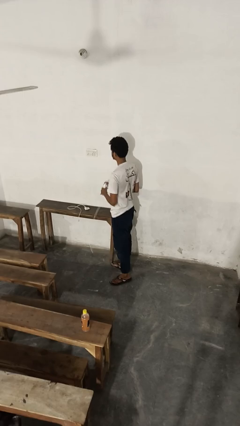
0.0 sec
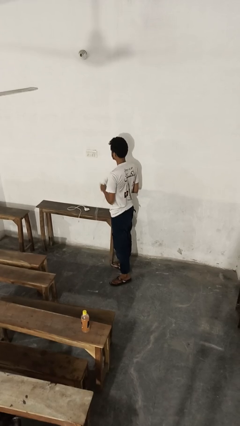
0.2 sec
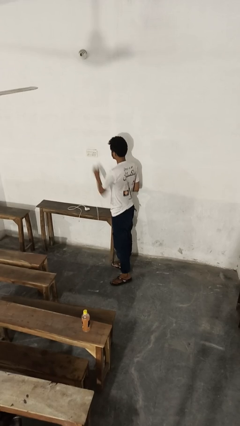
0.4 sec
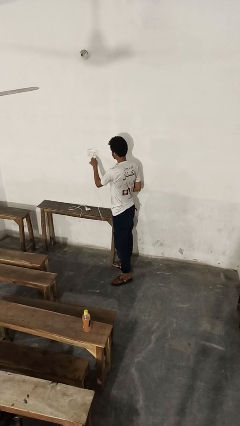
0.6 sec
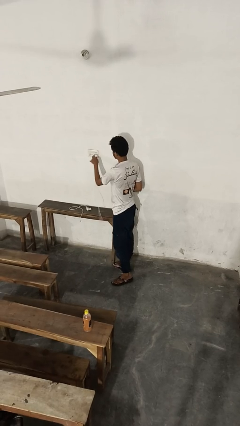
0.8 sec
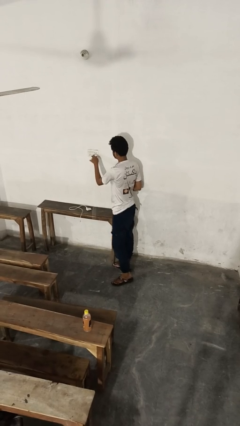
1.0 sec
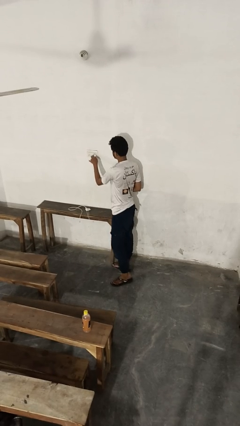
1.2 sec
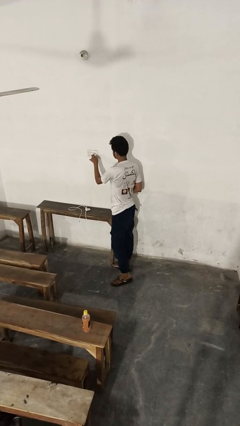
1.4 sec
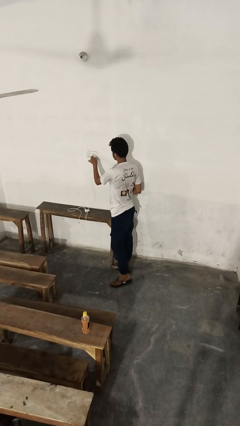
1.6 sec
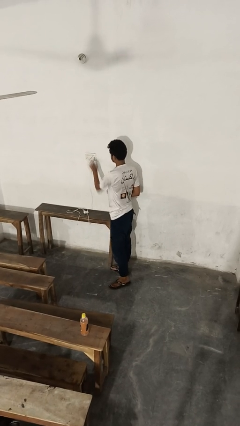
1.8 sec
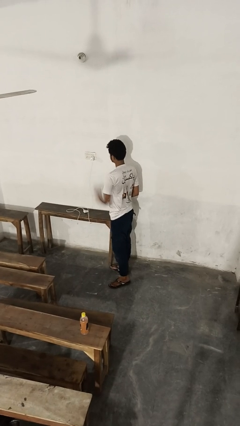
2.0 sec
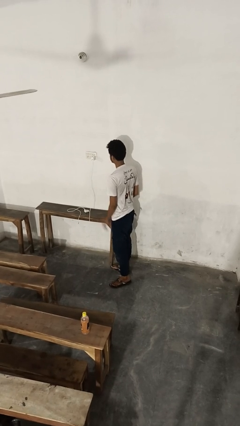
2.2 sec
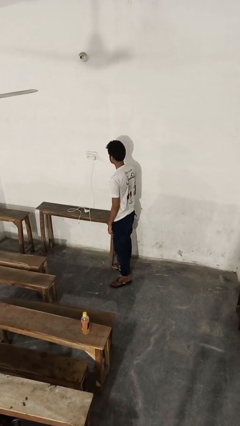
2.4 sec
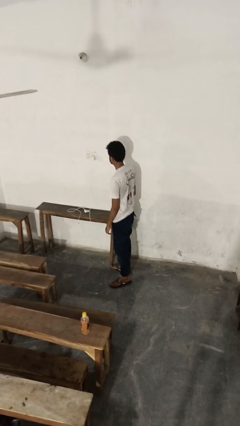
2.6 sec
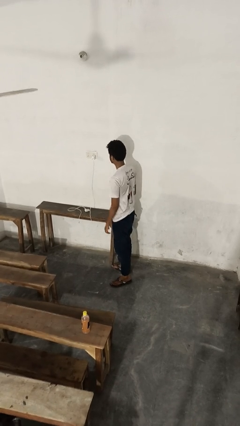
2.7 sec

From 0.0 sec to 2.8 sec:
person plugs into electrical socket

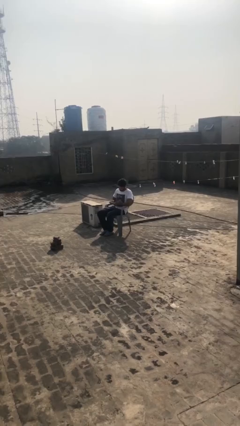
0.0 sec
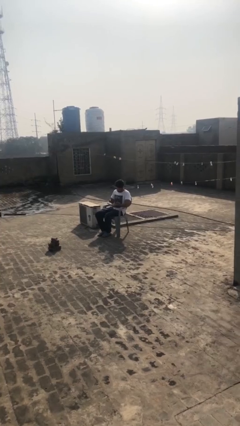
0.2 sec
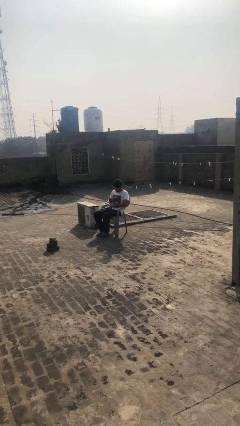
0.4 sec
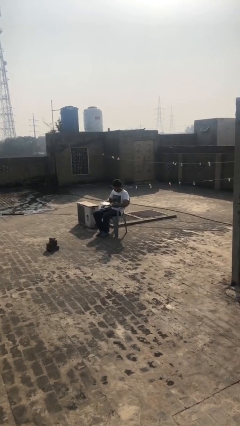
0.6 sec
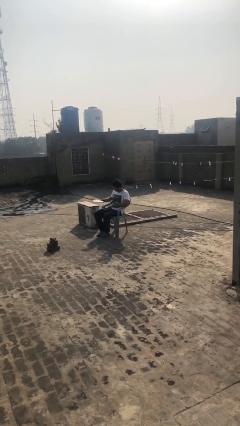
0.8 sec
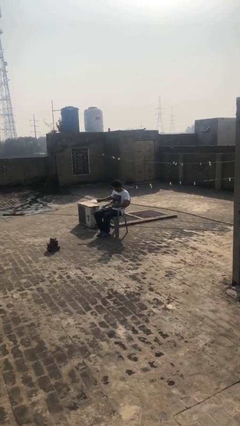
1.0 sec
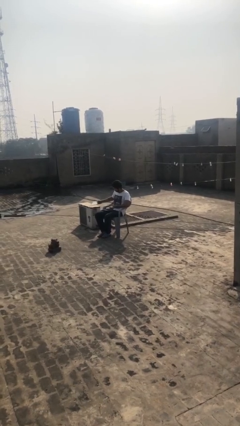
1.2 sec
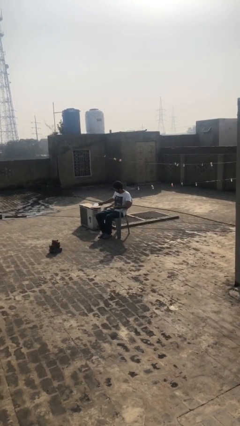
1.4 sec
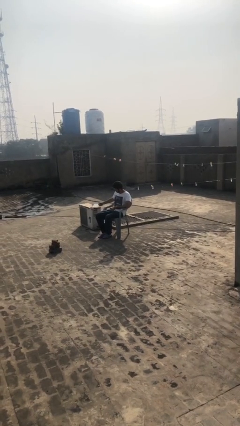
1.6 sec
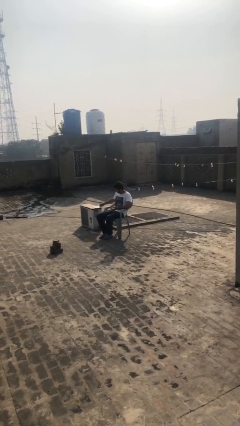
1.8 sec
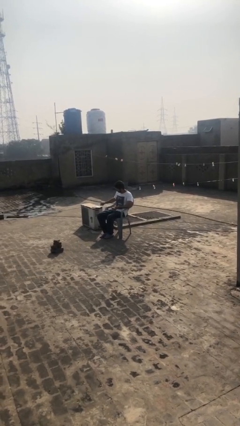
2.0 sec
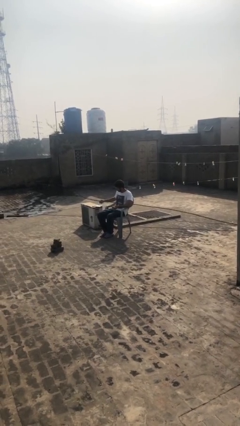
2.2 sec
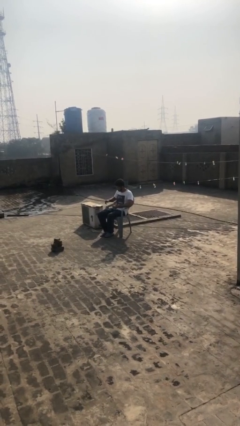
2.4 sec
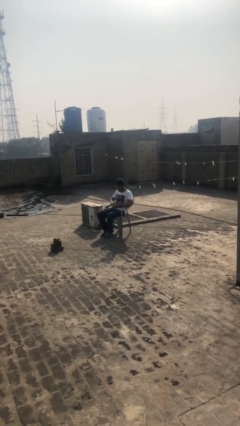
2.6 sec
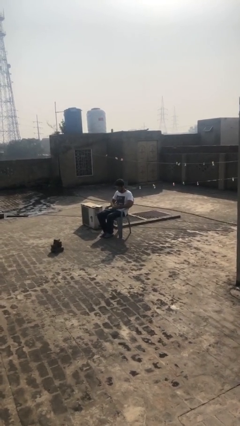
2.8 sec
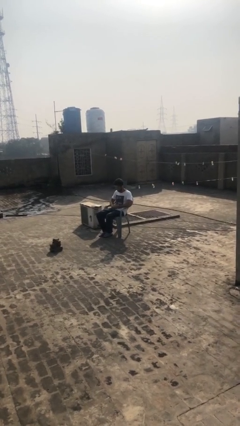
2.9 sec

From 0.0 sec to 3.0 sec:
person puts down object on table

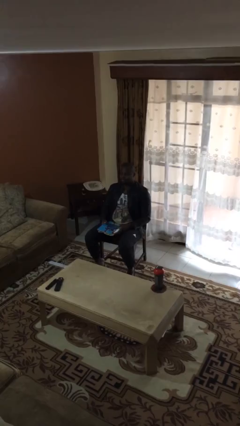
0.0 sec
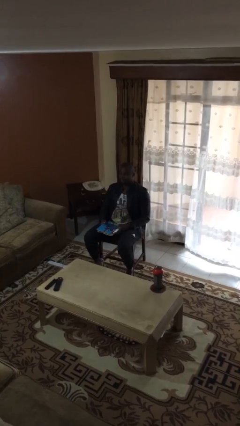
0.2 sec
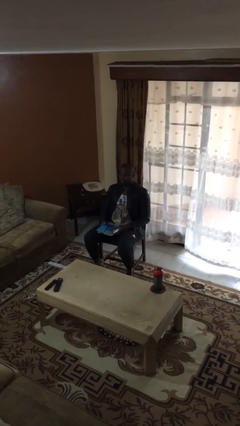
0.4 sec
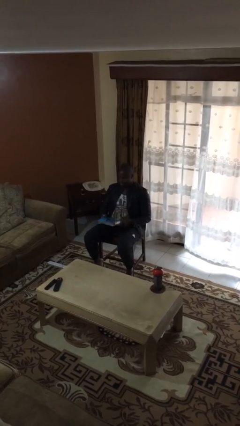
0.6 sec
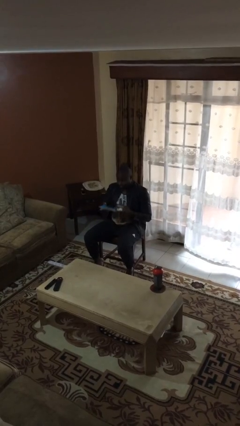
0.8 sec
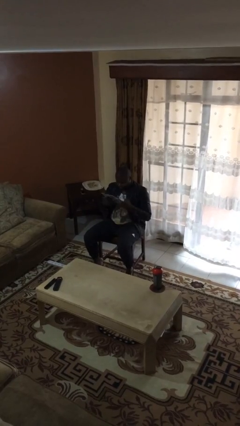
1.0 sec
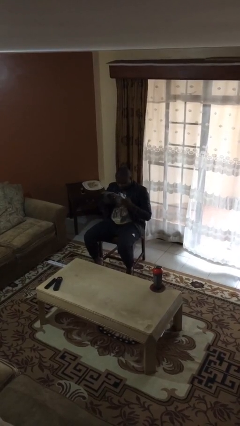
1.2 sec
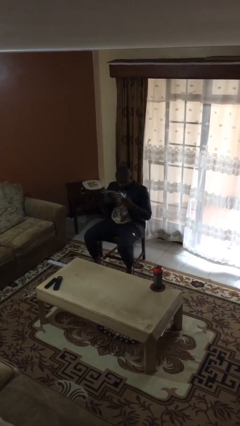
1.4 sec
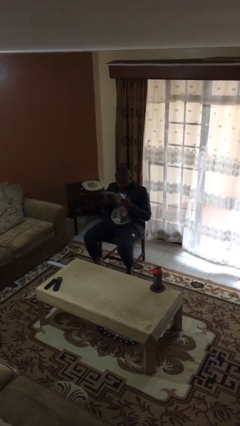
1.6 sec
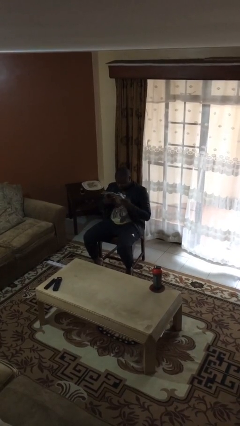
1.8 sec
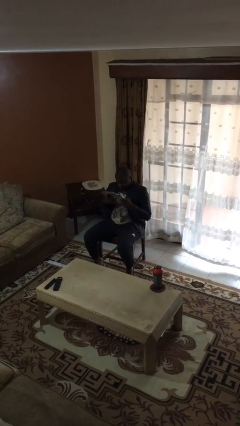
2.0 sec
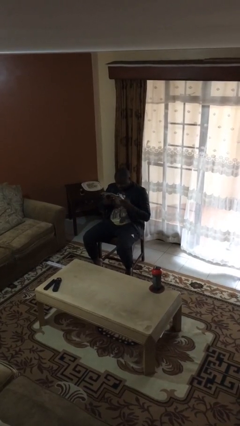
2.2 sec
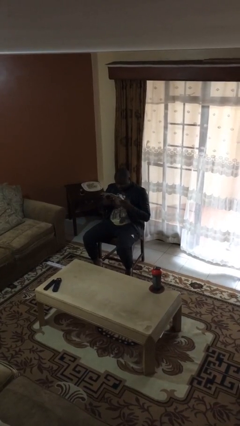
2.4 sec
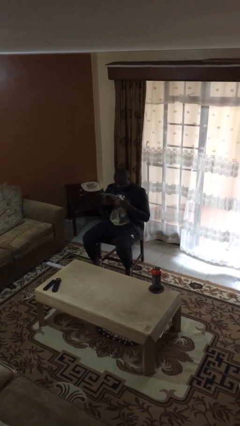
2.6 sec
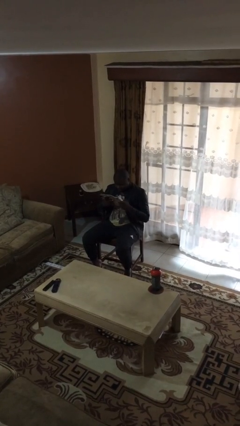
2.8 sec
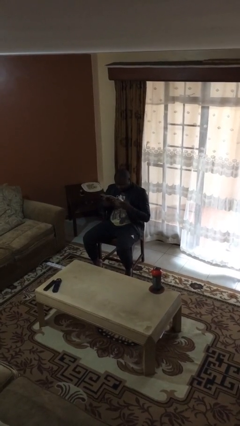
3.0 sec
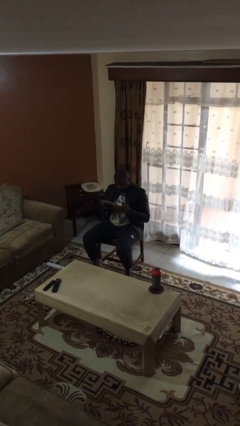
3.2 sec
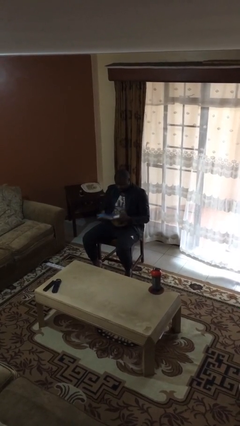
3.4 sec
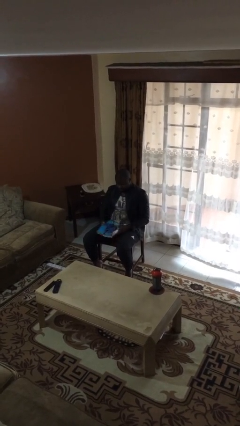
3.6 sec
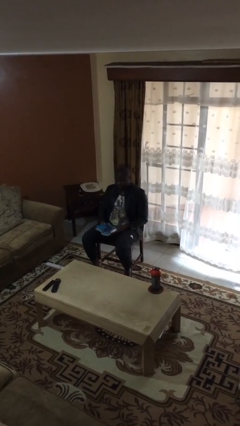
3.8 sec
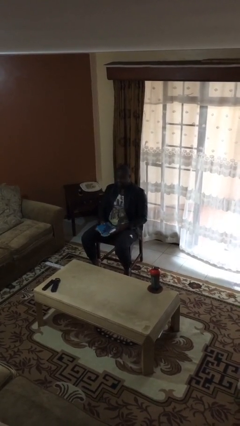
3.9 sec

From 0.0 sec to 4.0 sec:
person reads document

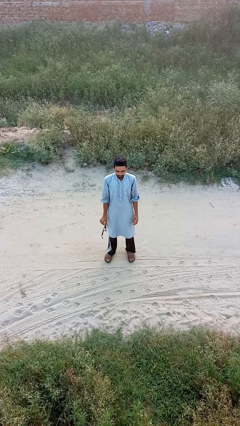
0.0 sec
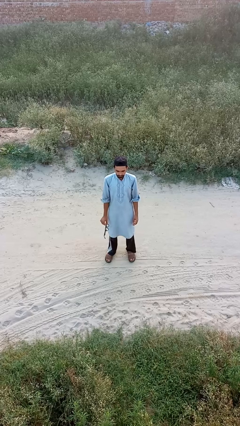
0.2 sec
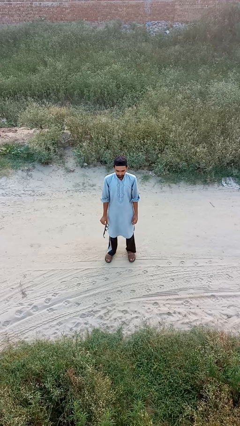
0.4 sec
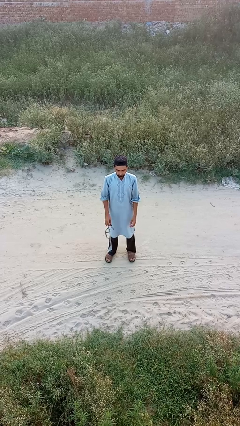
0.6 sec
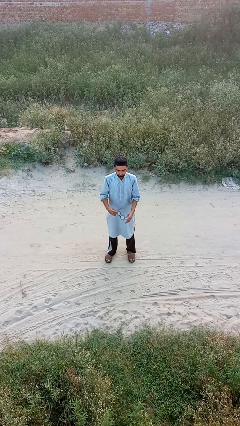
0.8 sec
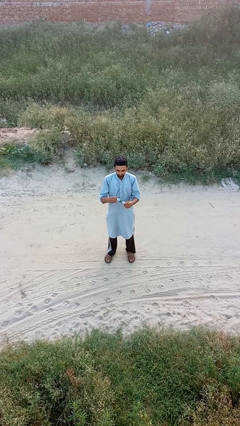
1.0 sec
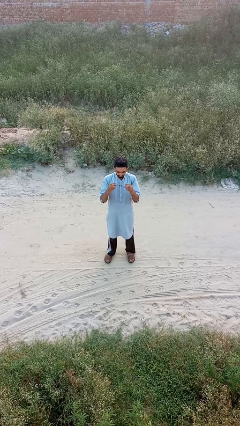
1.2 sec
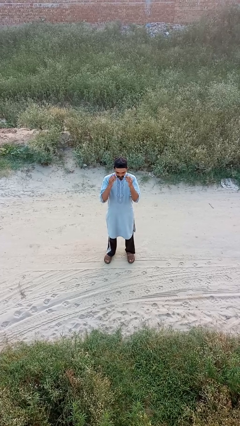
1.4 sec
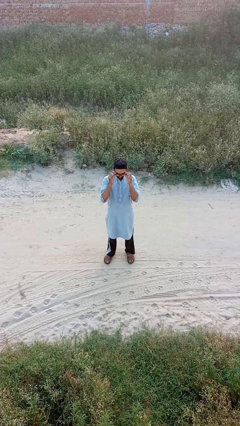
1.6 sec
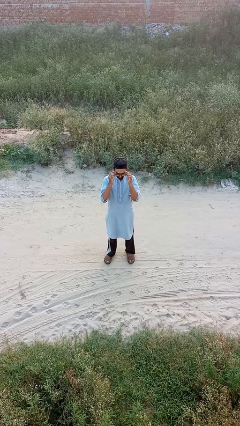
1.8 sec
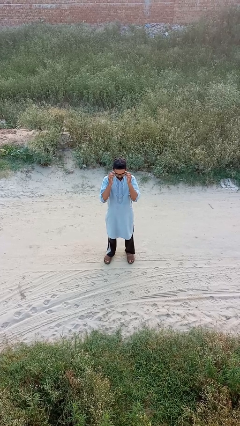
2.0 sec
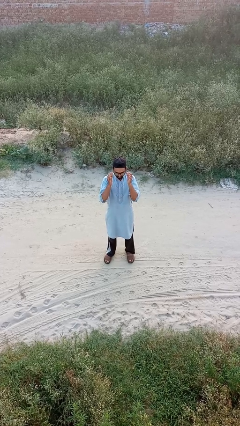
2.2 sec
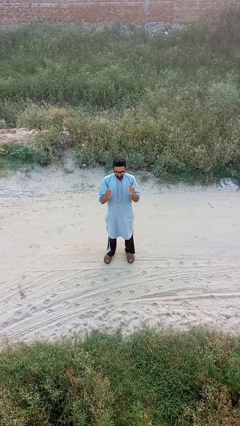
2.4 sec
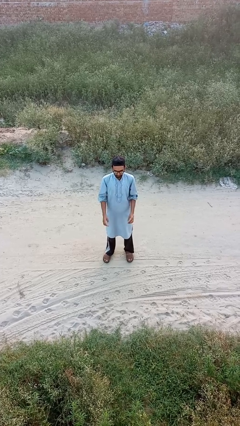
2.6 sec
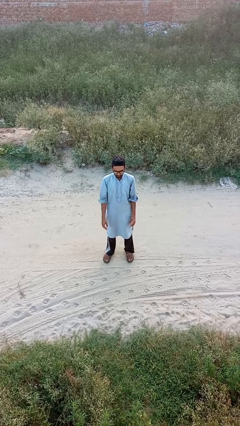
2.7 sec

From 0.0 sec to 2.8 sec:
person puts on glasses

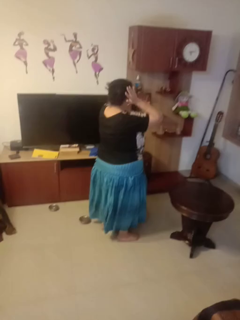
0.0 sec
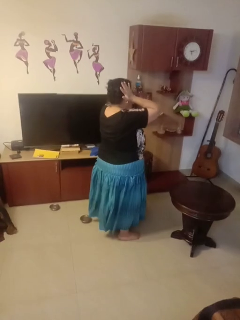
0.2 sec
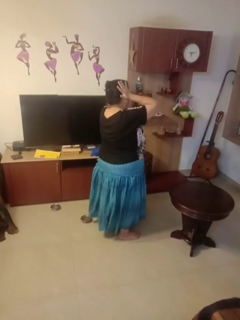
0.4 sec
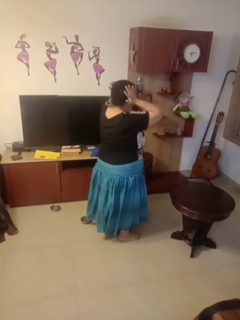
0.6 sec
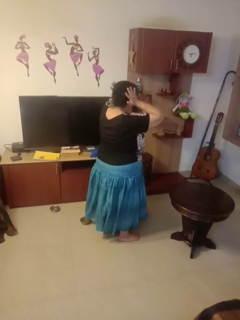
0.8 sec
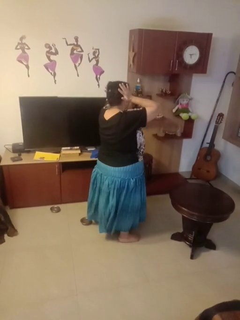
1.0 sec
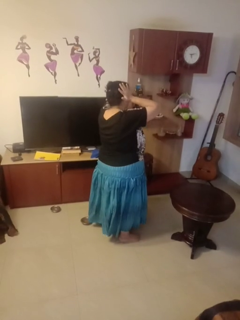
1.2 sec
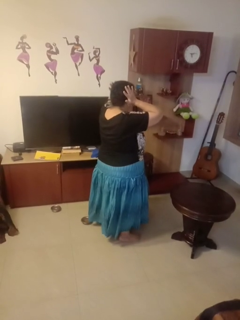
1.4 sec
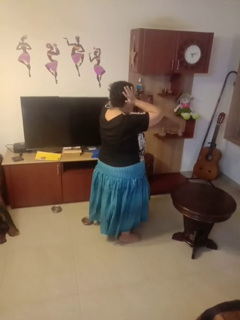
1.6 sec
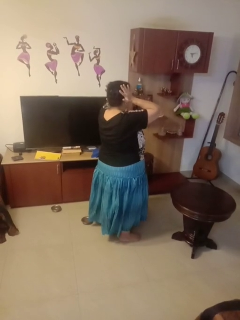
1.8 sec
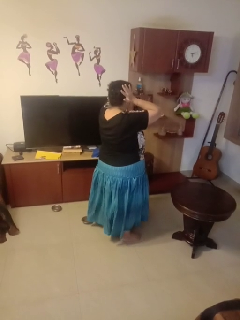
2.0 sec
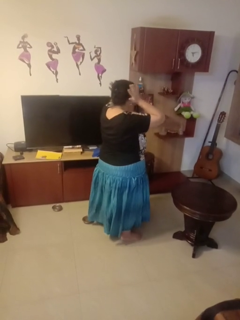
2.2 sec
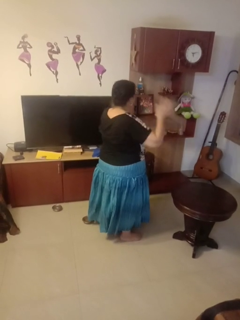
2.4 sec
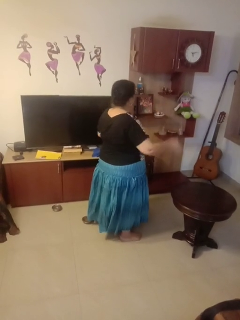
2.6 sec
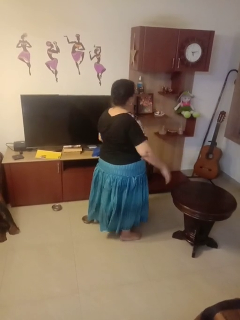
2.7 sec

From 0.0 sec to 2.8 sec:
person puts fingers in ear

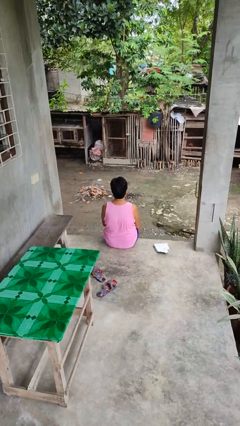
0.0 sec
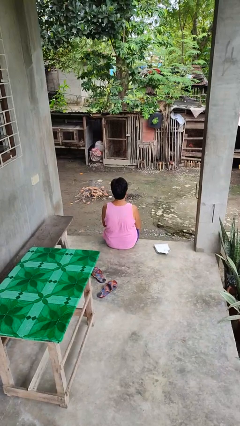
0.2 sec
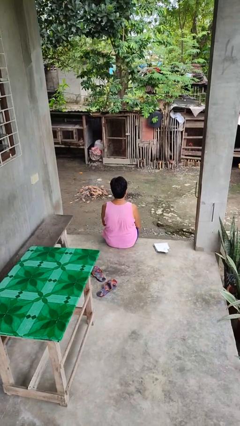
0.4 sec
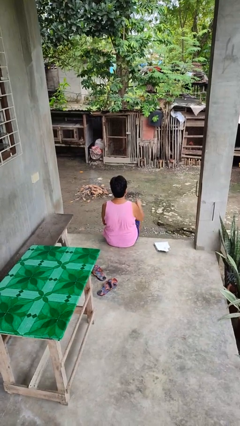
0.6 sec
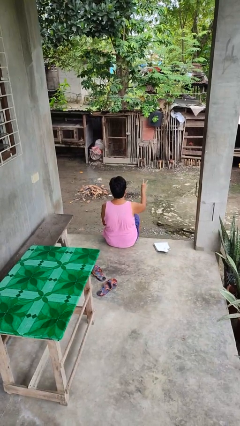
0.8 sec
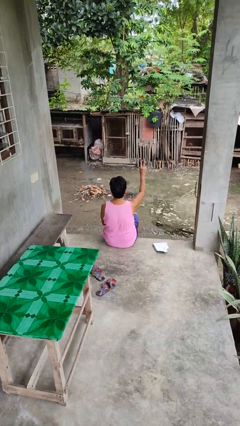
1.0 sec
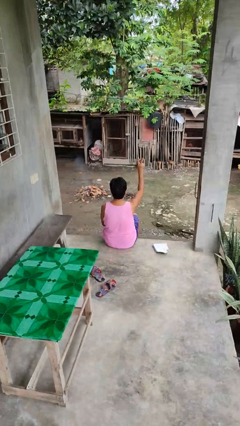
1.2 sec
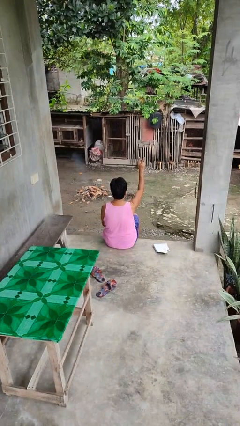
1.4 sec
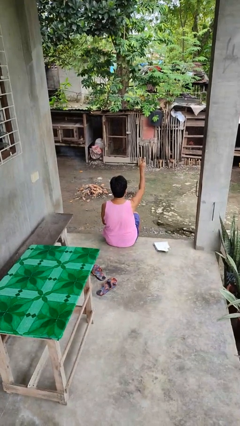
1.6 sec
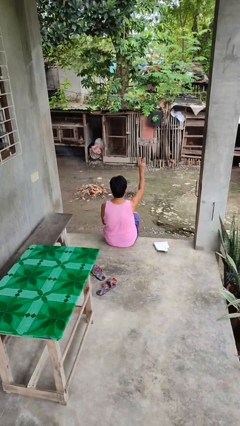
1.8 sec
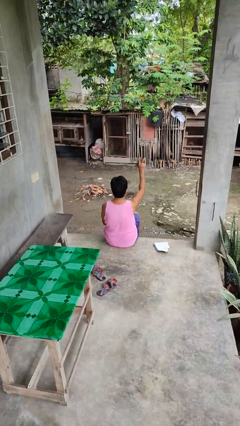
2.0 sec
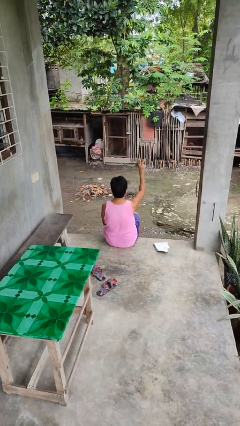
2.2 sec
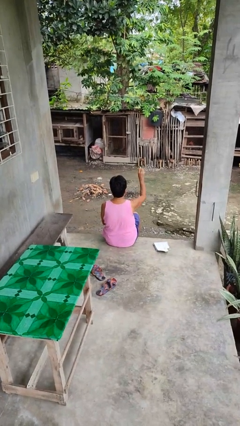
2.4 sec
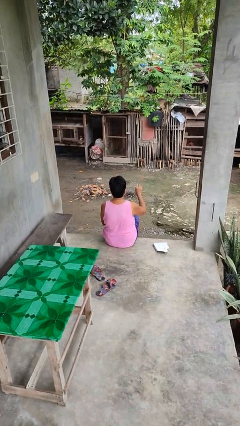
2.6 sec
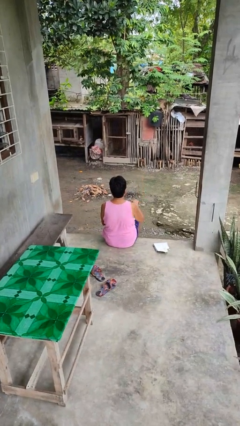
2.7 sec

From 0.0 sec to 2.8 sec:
person gestures peace

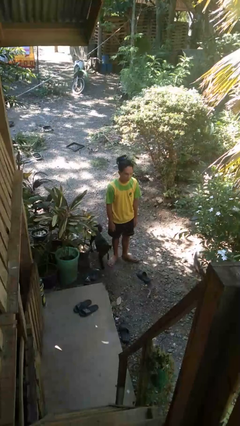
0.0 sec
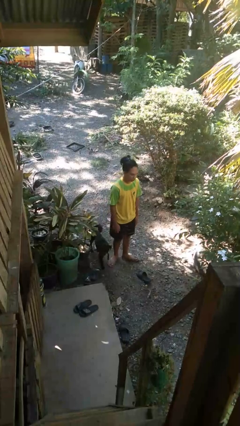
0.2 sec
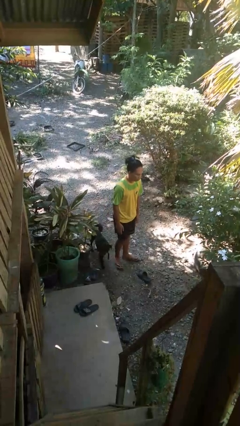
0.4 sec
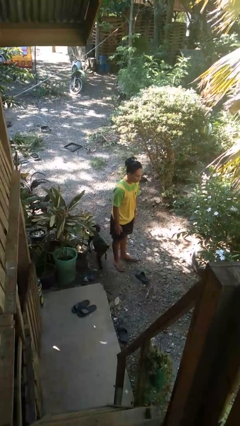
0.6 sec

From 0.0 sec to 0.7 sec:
person bows
